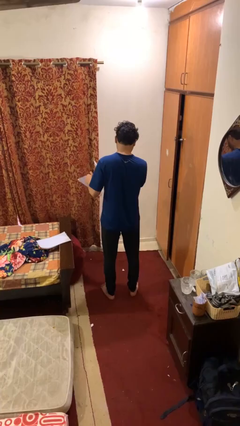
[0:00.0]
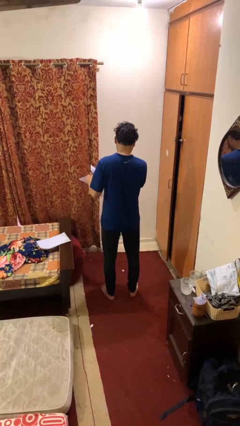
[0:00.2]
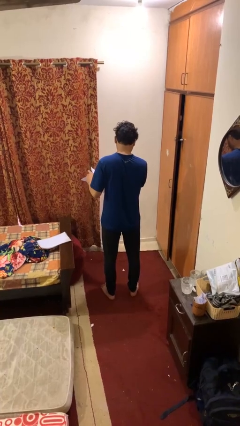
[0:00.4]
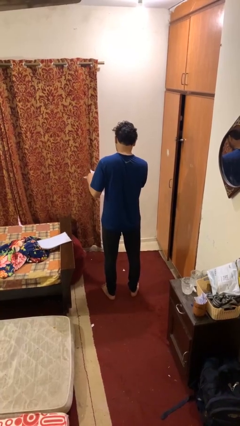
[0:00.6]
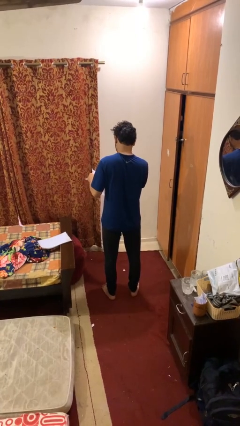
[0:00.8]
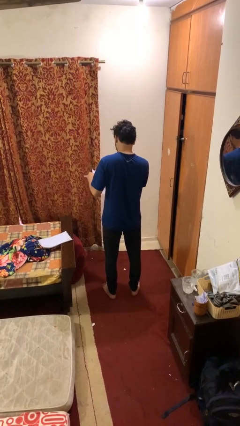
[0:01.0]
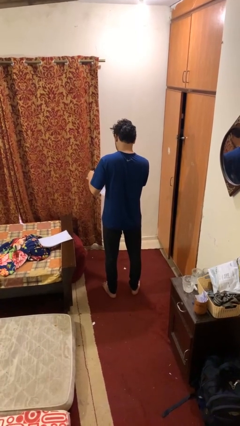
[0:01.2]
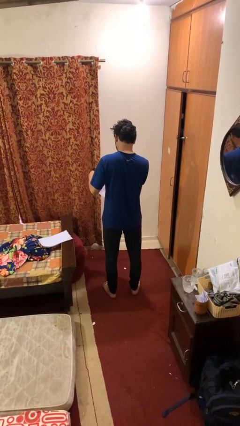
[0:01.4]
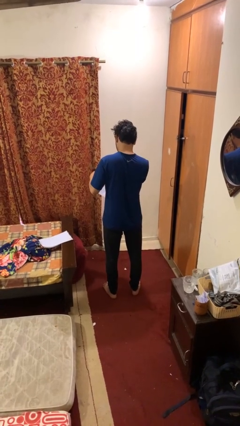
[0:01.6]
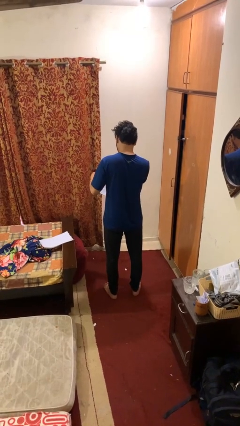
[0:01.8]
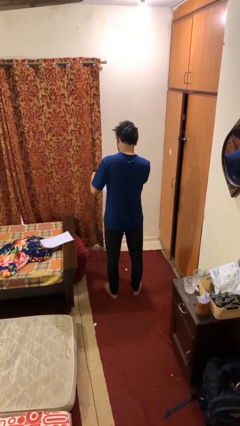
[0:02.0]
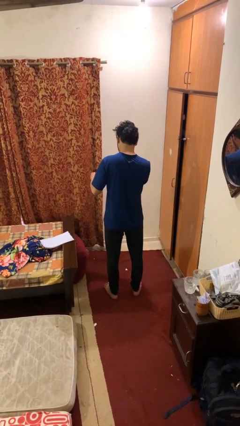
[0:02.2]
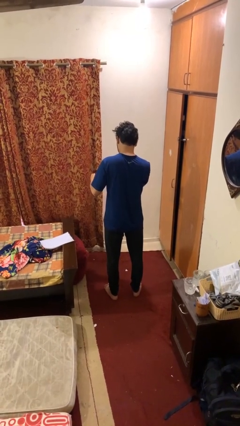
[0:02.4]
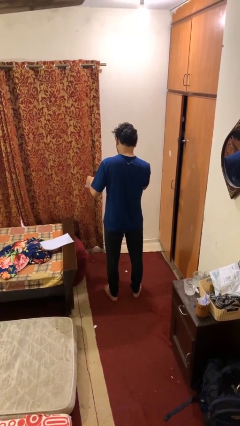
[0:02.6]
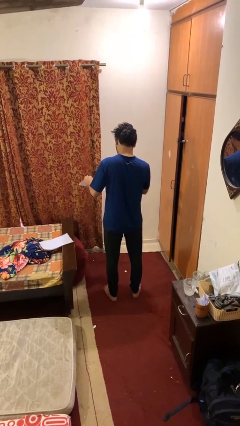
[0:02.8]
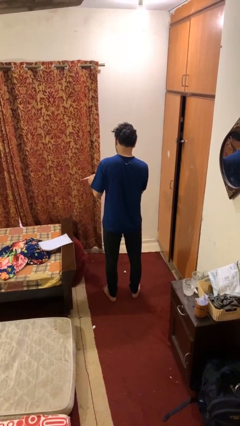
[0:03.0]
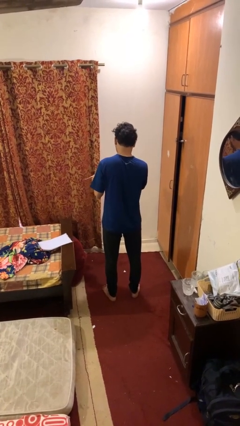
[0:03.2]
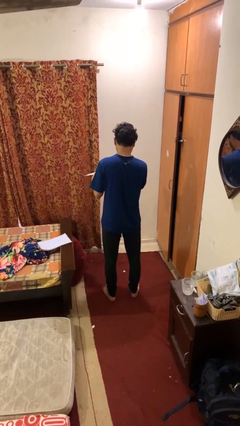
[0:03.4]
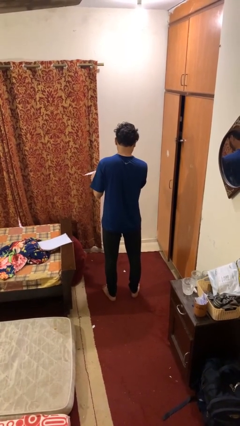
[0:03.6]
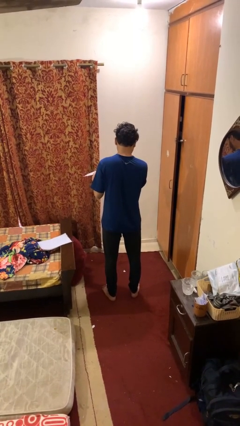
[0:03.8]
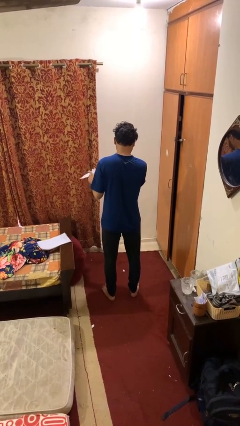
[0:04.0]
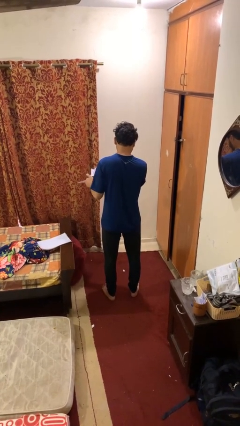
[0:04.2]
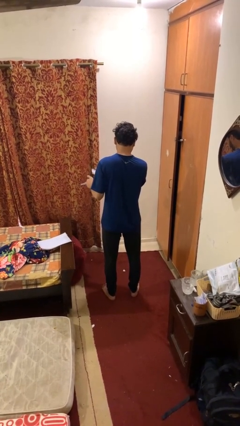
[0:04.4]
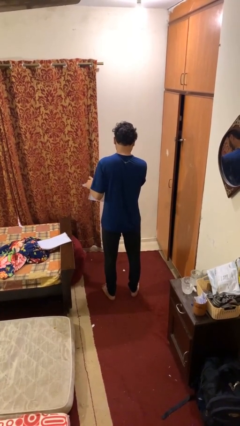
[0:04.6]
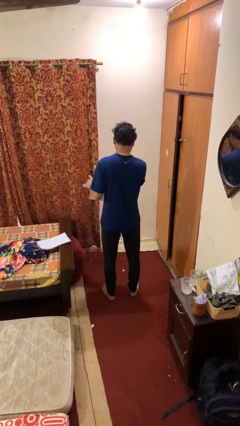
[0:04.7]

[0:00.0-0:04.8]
person tears paper

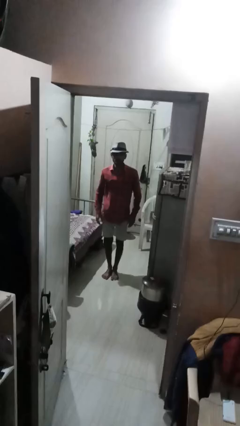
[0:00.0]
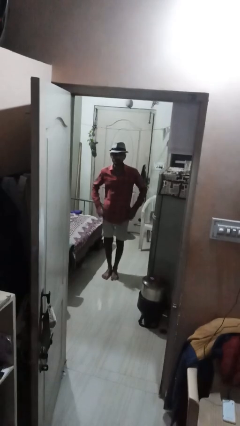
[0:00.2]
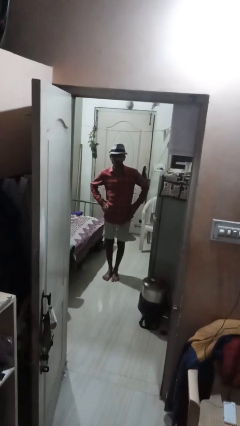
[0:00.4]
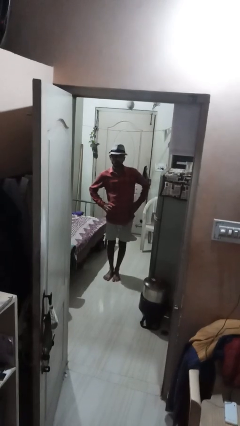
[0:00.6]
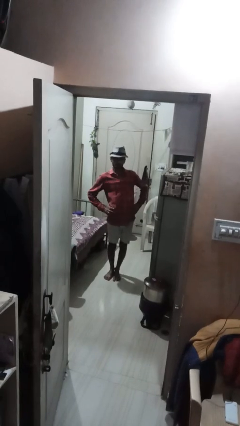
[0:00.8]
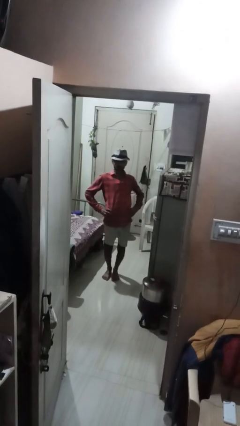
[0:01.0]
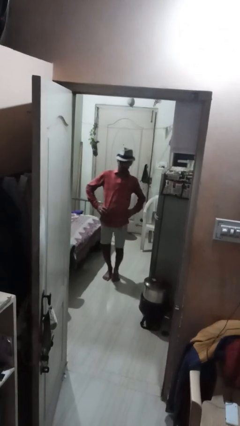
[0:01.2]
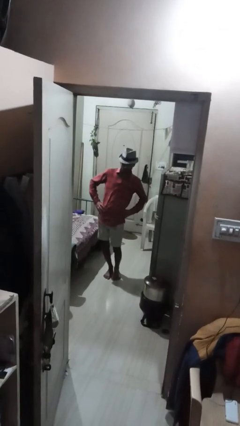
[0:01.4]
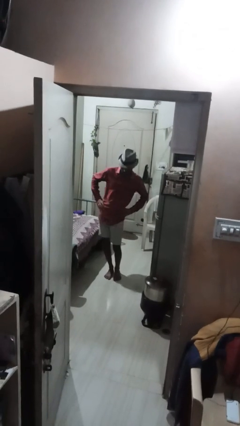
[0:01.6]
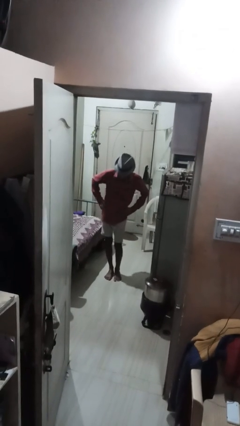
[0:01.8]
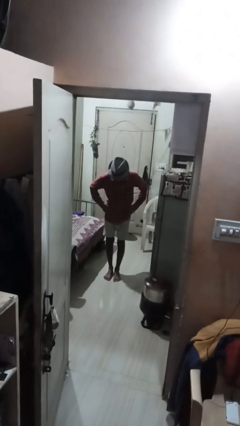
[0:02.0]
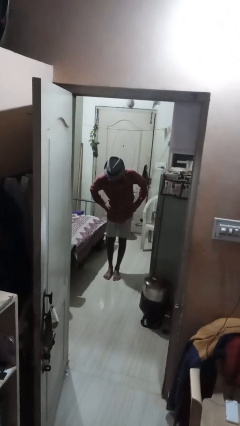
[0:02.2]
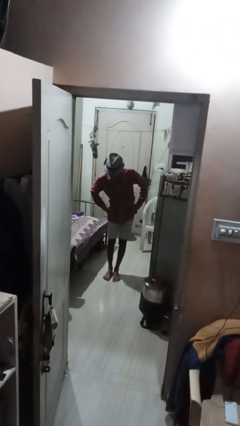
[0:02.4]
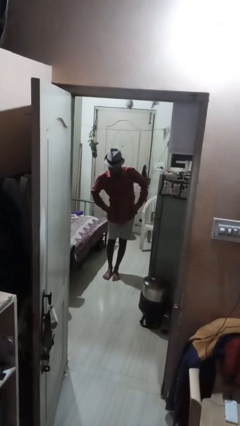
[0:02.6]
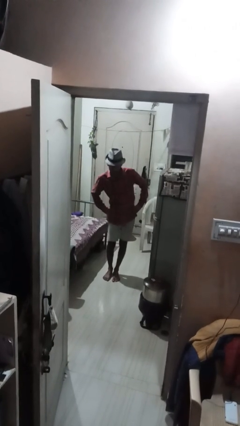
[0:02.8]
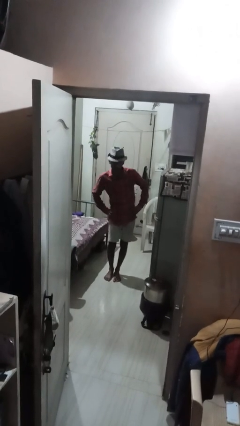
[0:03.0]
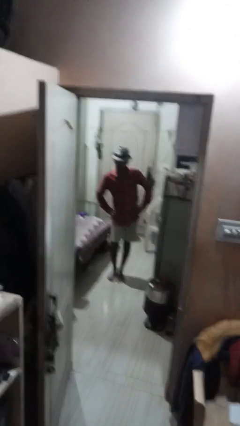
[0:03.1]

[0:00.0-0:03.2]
person wiggles hips

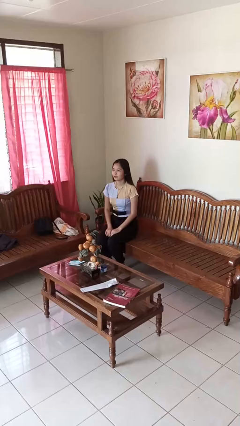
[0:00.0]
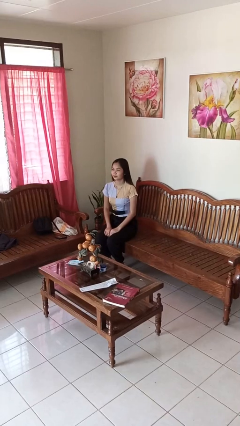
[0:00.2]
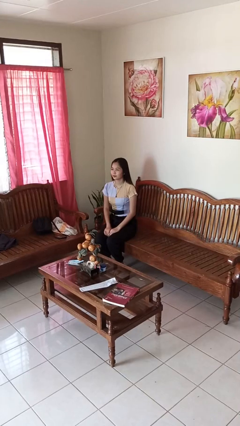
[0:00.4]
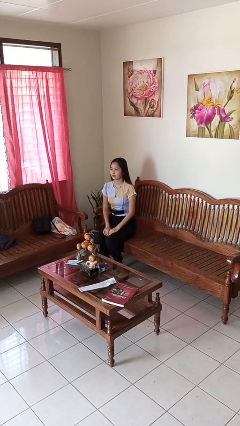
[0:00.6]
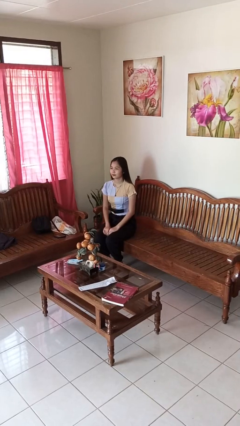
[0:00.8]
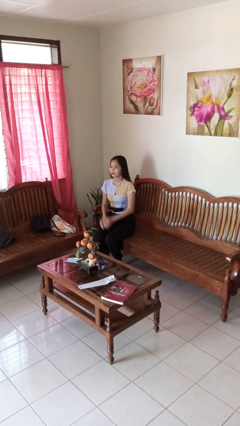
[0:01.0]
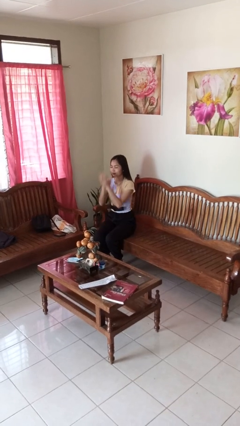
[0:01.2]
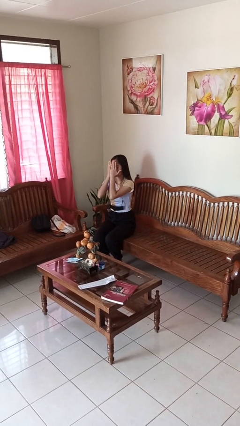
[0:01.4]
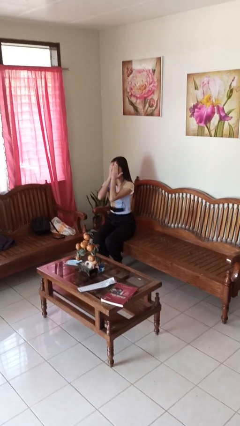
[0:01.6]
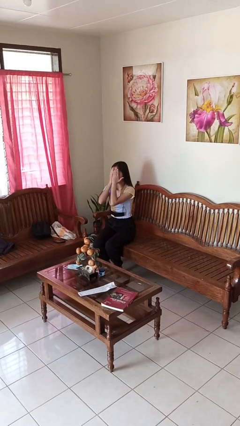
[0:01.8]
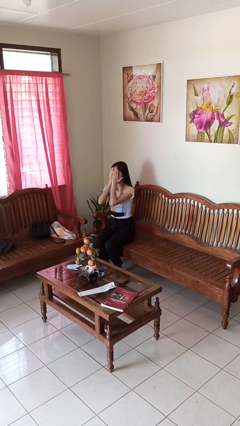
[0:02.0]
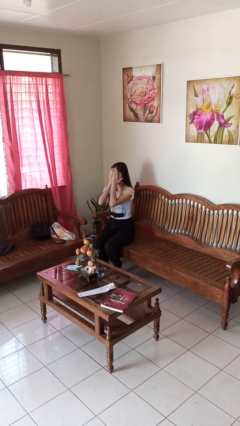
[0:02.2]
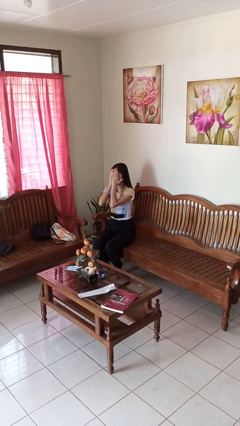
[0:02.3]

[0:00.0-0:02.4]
person covers face with hands

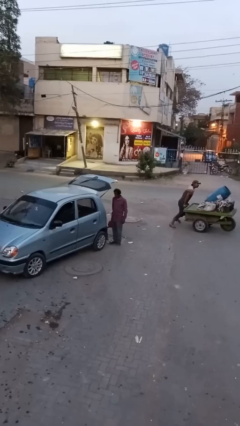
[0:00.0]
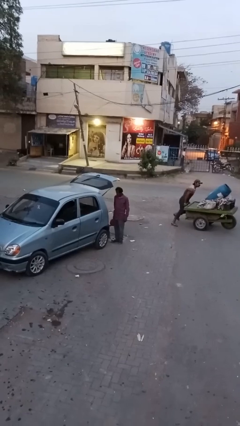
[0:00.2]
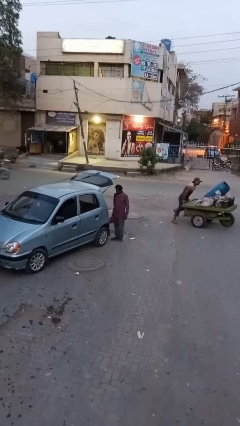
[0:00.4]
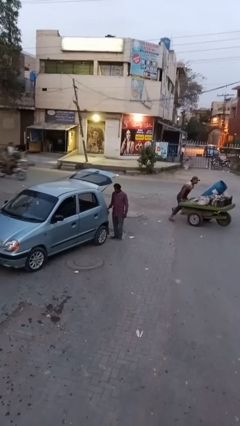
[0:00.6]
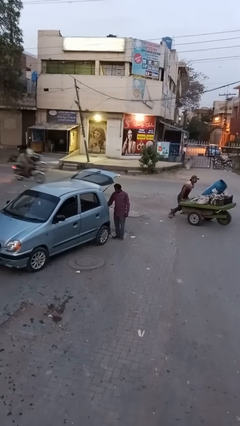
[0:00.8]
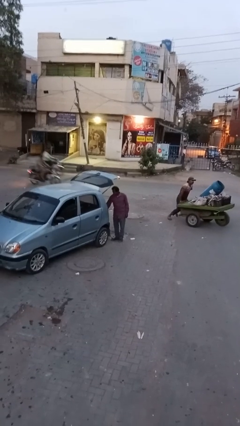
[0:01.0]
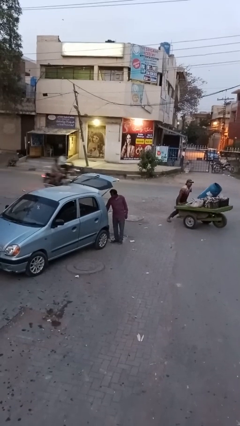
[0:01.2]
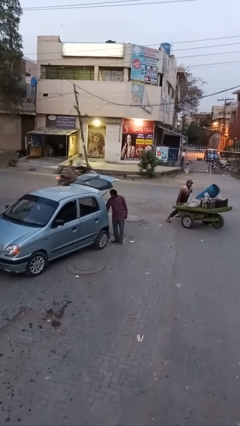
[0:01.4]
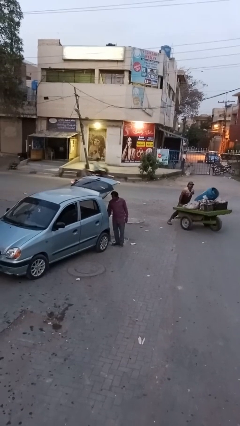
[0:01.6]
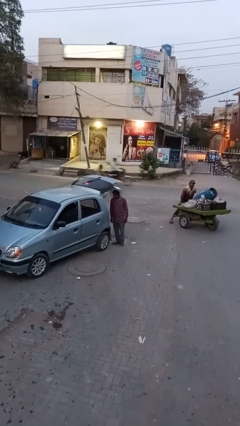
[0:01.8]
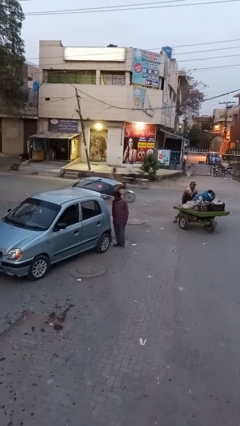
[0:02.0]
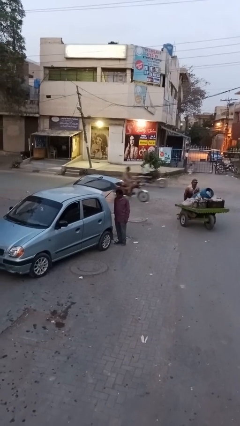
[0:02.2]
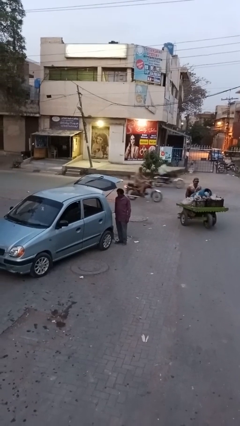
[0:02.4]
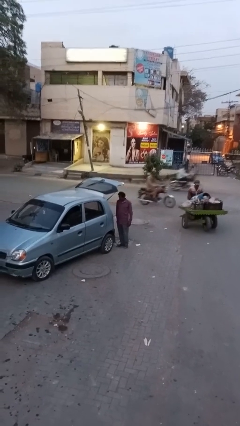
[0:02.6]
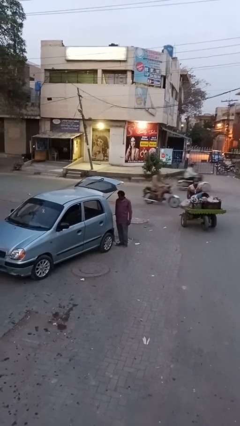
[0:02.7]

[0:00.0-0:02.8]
person loads car

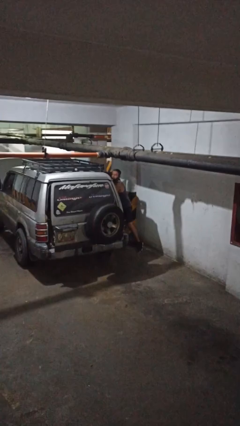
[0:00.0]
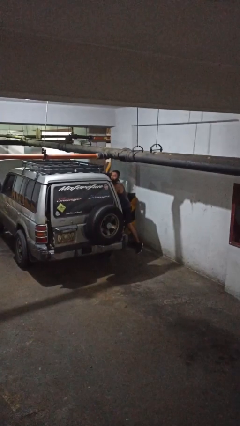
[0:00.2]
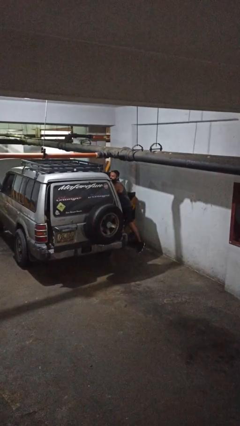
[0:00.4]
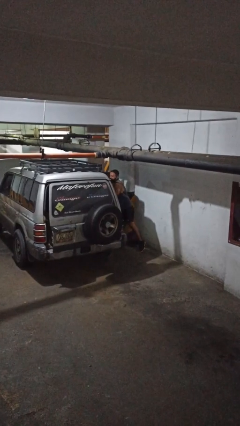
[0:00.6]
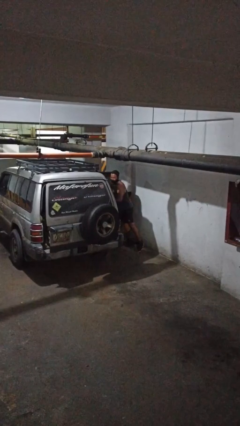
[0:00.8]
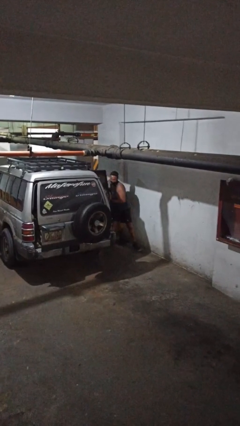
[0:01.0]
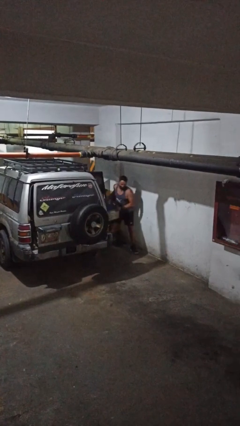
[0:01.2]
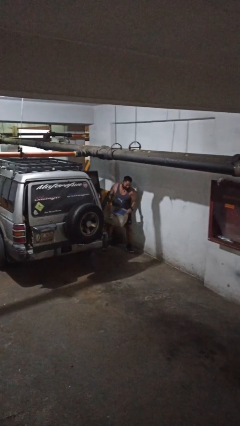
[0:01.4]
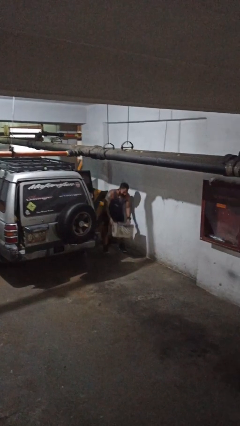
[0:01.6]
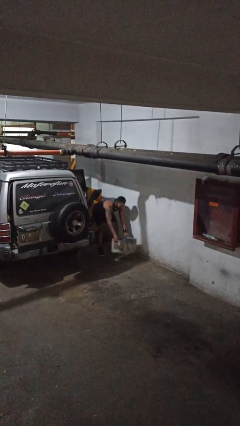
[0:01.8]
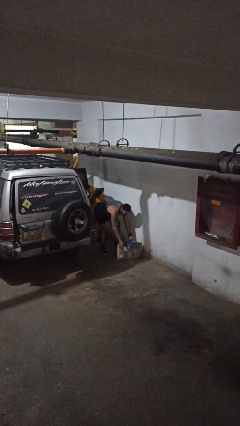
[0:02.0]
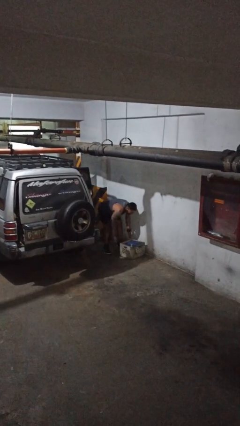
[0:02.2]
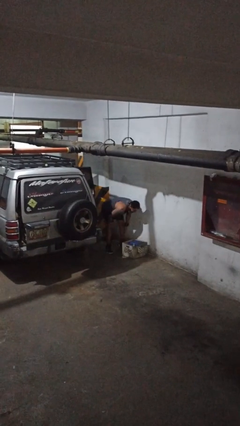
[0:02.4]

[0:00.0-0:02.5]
person unloads car

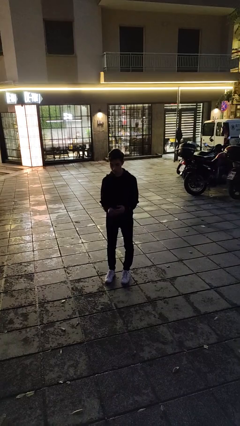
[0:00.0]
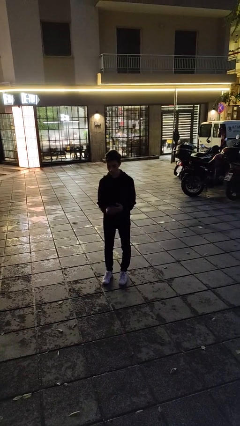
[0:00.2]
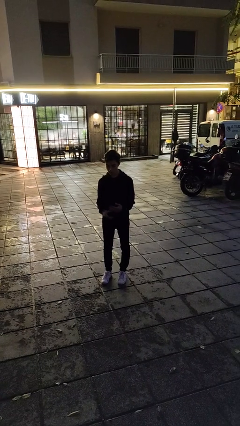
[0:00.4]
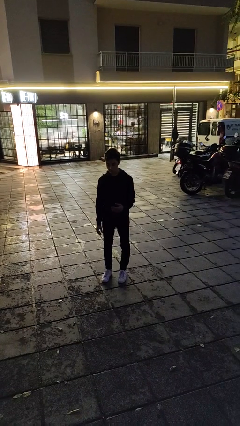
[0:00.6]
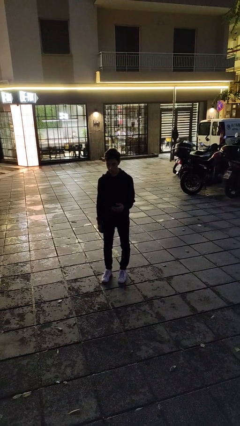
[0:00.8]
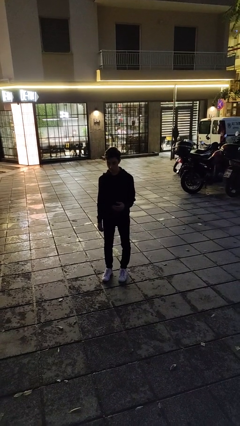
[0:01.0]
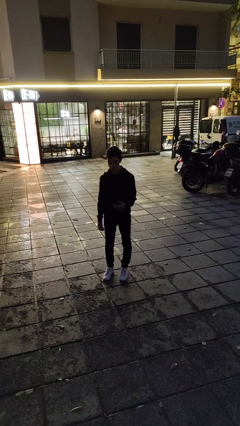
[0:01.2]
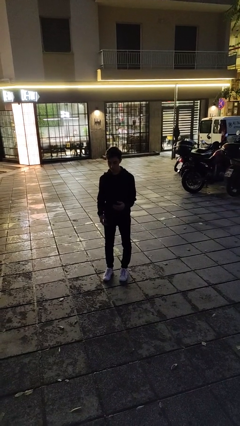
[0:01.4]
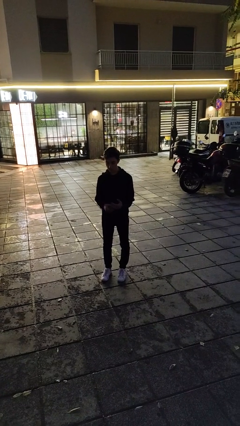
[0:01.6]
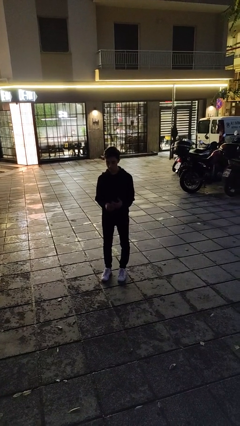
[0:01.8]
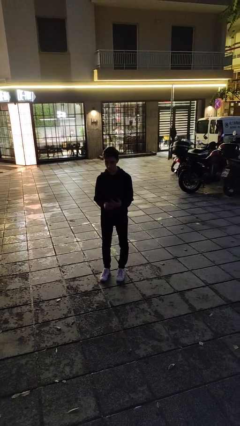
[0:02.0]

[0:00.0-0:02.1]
person puts on ring
